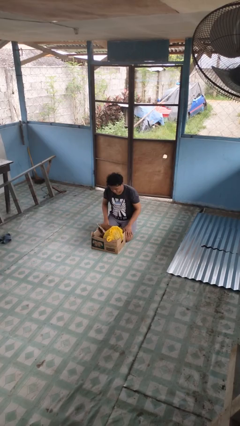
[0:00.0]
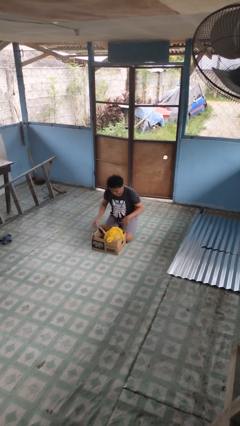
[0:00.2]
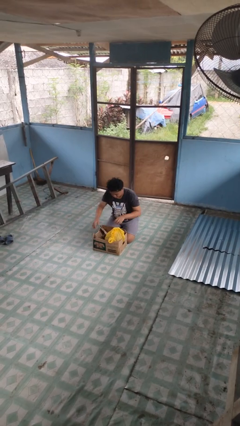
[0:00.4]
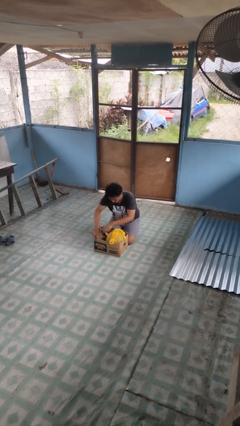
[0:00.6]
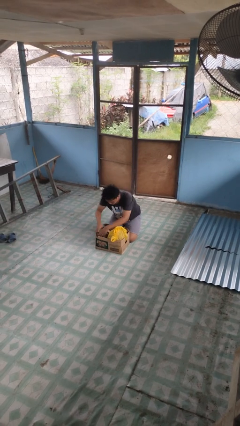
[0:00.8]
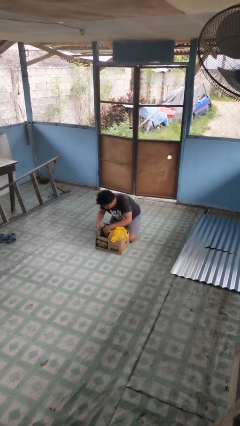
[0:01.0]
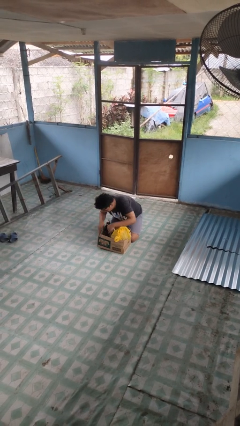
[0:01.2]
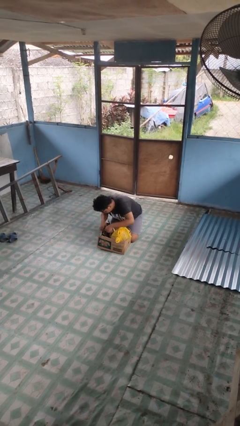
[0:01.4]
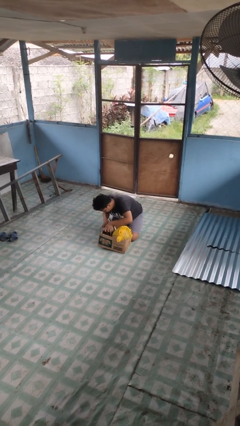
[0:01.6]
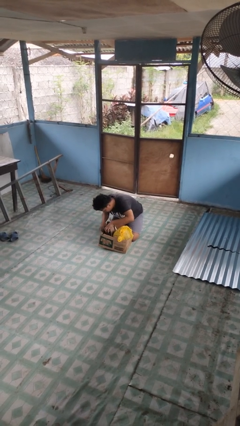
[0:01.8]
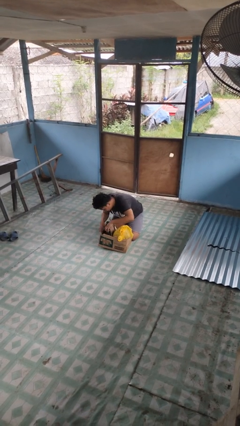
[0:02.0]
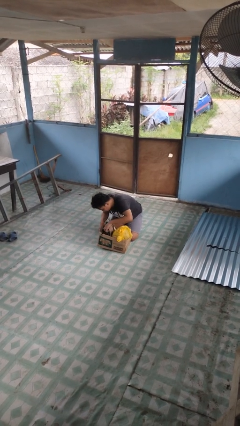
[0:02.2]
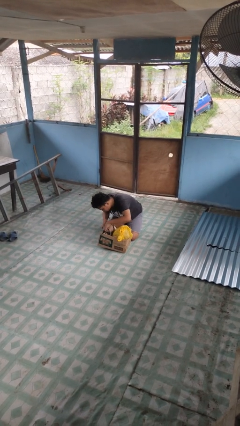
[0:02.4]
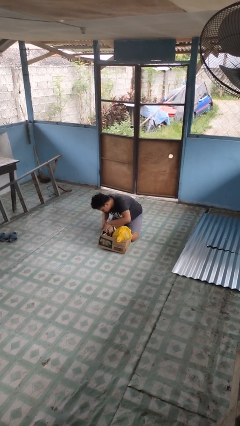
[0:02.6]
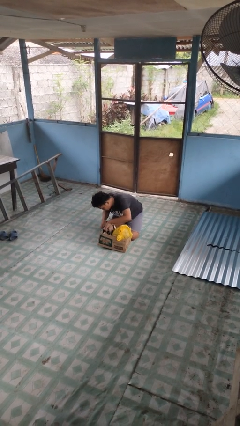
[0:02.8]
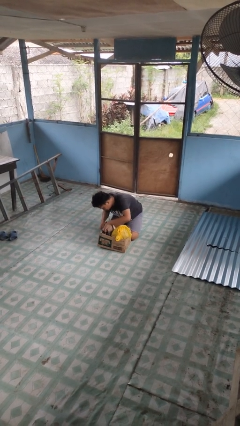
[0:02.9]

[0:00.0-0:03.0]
person searches in box

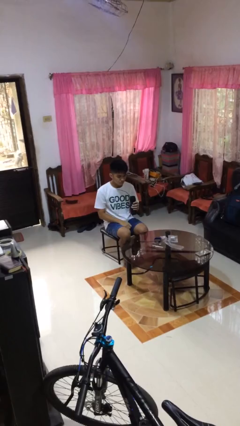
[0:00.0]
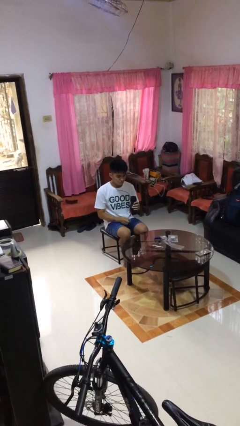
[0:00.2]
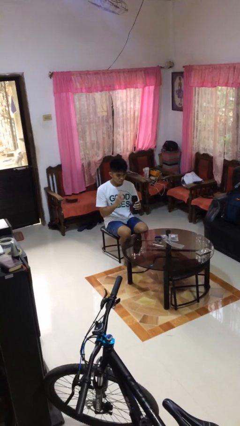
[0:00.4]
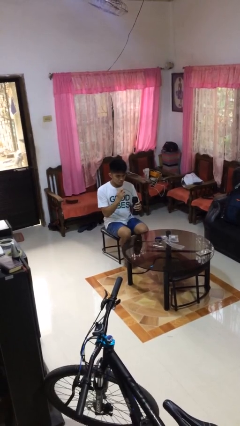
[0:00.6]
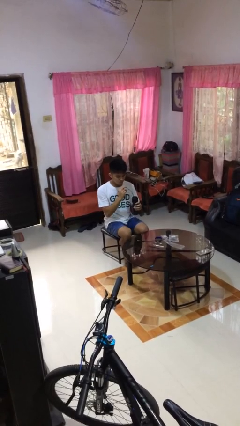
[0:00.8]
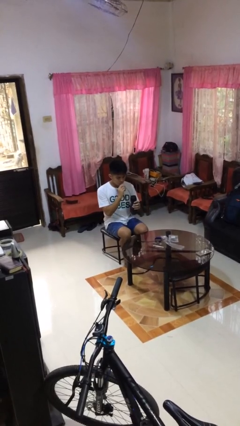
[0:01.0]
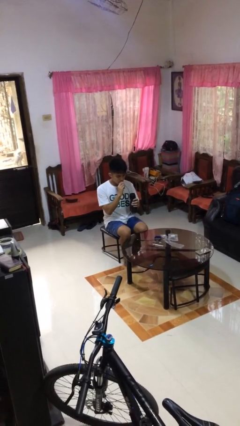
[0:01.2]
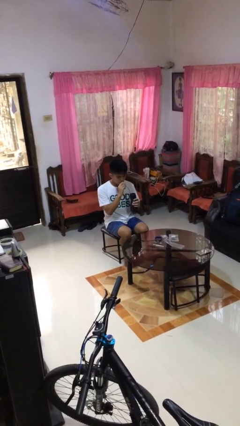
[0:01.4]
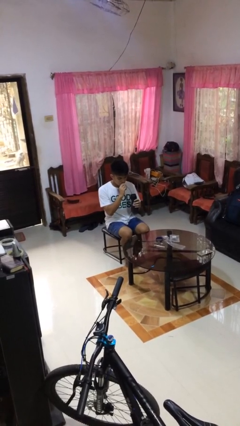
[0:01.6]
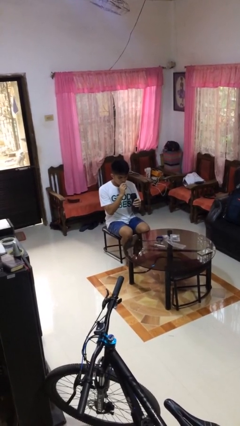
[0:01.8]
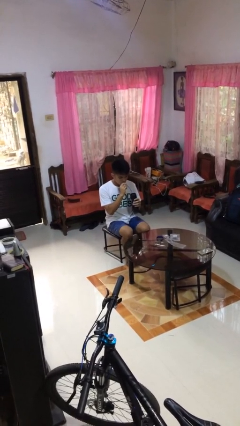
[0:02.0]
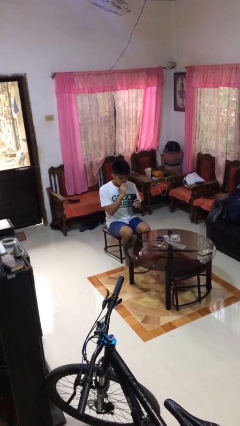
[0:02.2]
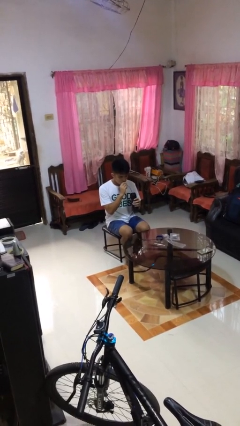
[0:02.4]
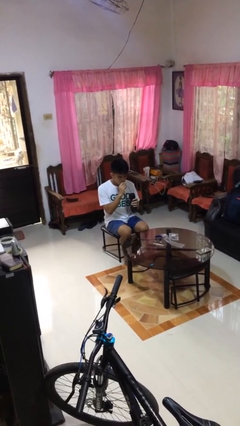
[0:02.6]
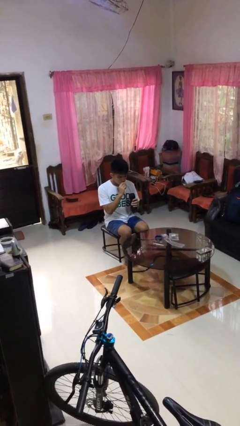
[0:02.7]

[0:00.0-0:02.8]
person drinks from straw

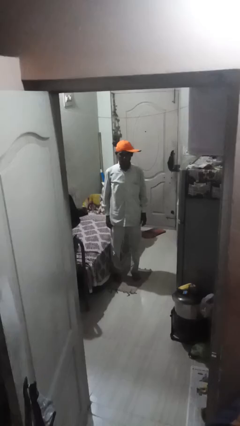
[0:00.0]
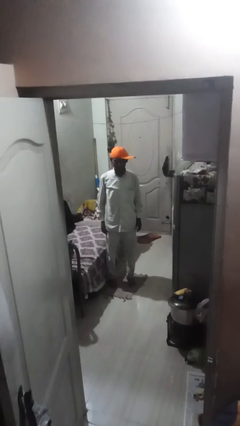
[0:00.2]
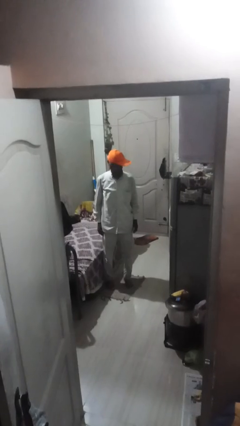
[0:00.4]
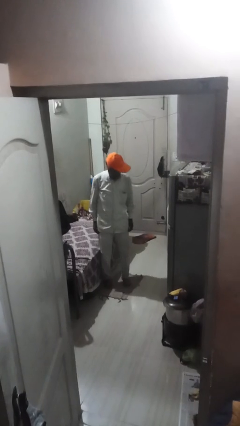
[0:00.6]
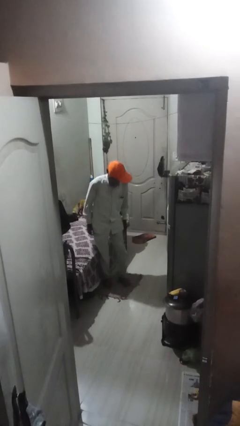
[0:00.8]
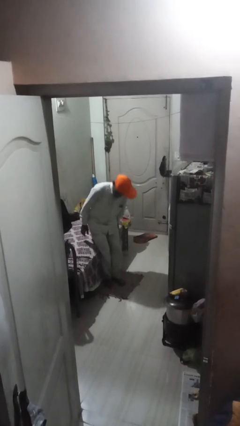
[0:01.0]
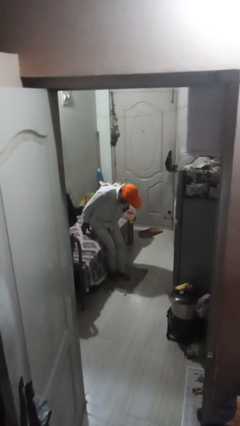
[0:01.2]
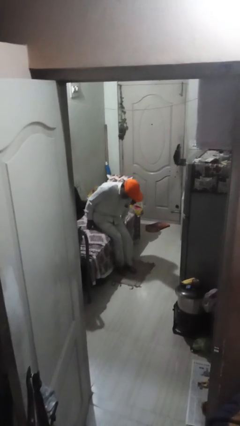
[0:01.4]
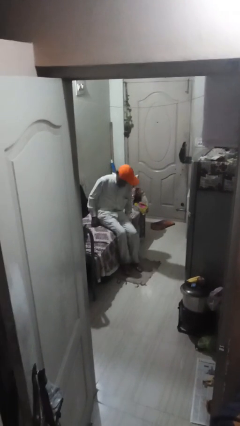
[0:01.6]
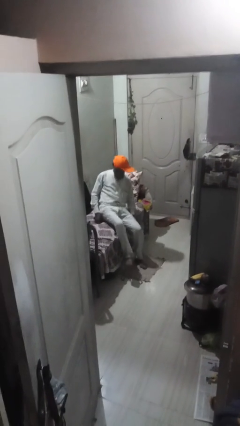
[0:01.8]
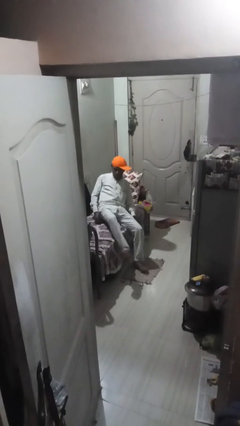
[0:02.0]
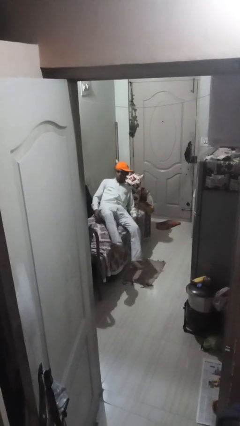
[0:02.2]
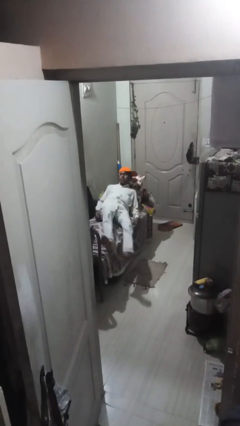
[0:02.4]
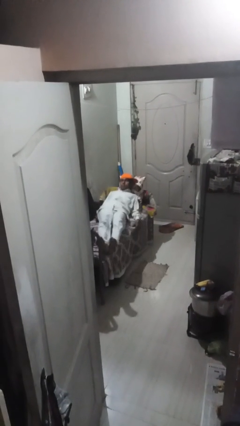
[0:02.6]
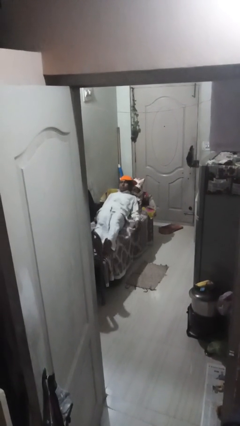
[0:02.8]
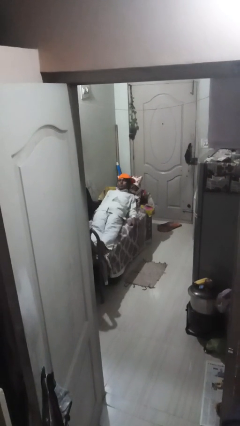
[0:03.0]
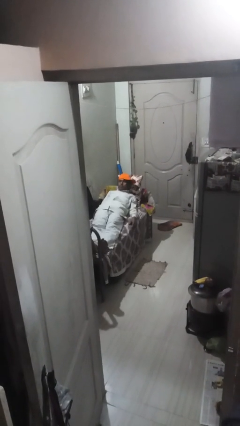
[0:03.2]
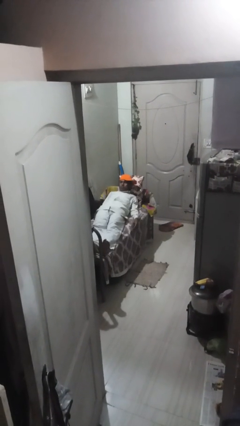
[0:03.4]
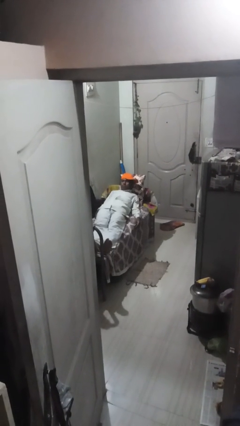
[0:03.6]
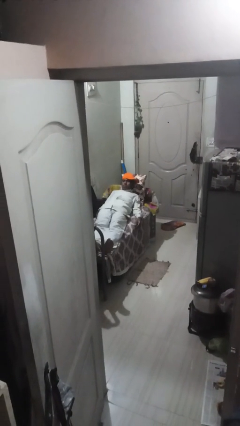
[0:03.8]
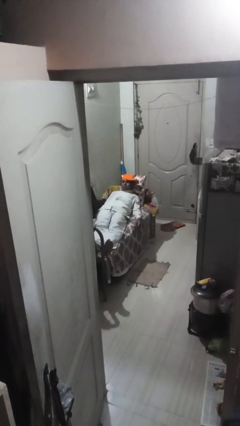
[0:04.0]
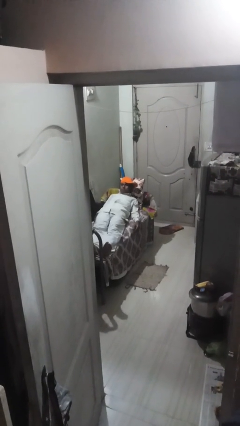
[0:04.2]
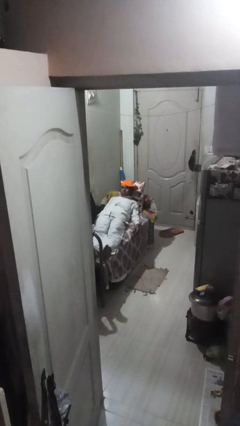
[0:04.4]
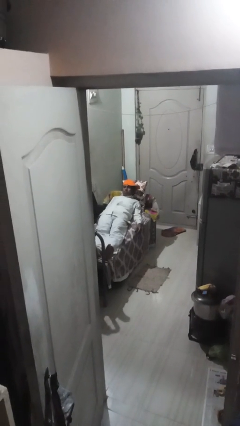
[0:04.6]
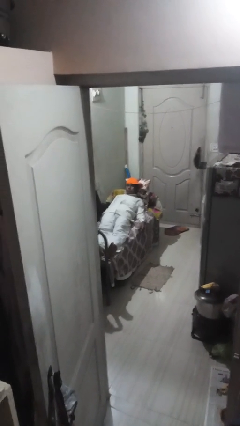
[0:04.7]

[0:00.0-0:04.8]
person lies down on bed
